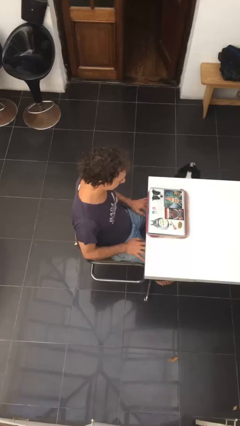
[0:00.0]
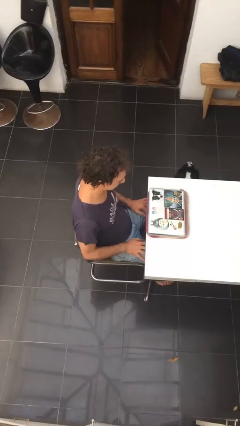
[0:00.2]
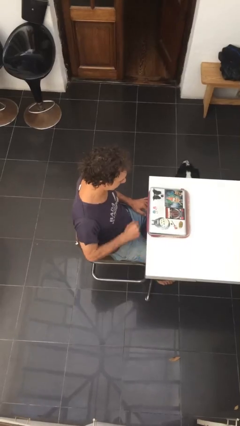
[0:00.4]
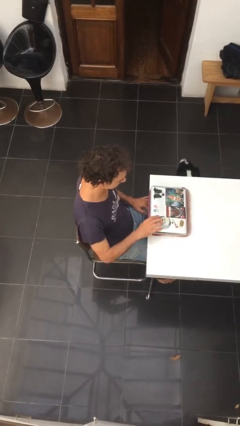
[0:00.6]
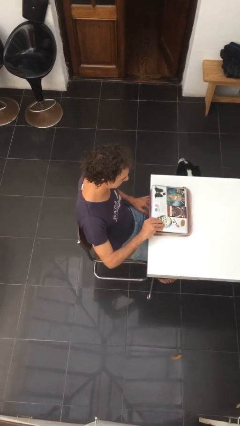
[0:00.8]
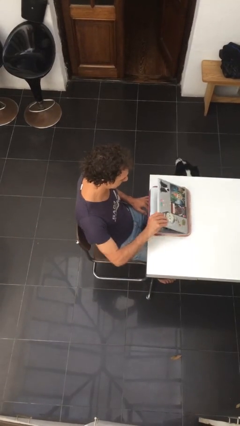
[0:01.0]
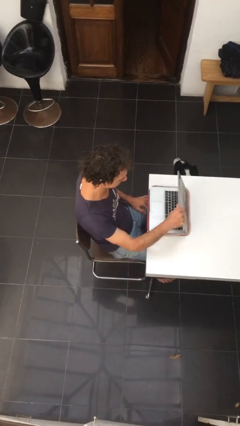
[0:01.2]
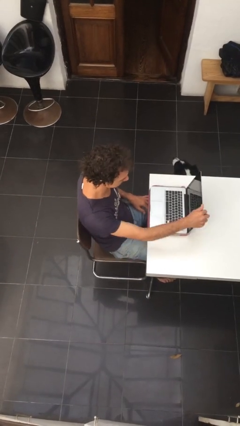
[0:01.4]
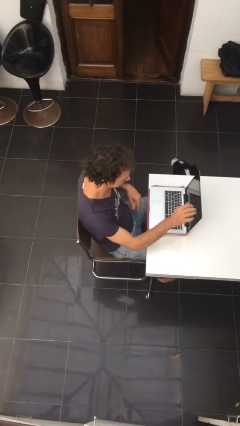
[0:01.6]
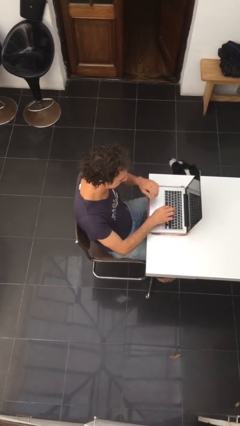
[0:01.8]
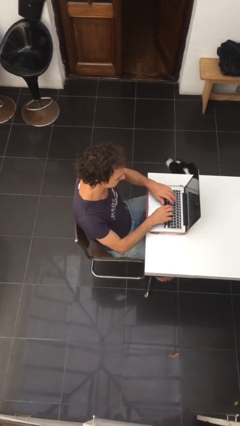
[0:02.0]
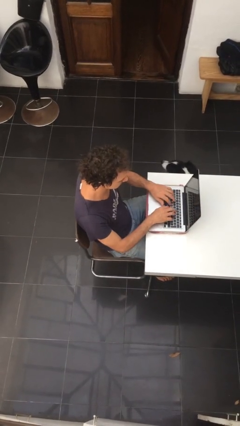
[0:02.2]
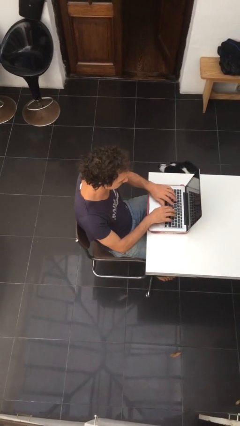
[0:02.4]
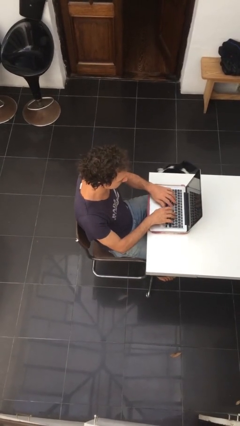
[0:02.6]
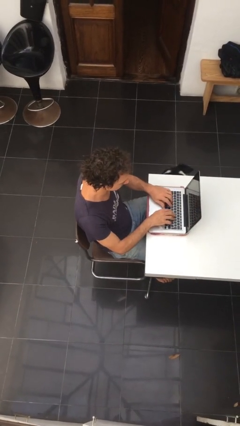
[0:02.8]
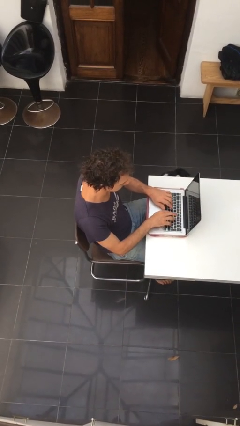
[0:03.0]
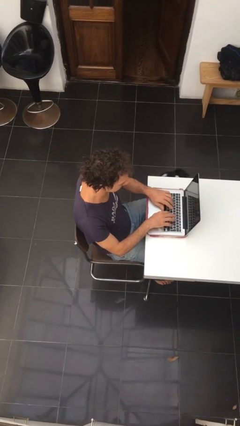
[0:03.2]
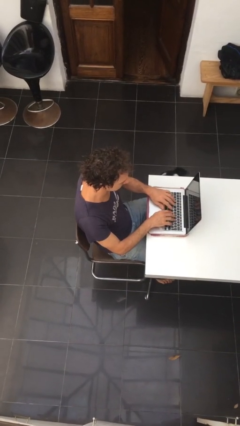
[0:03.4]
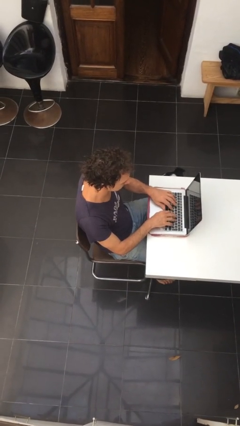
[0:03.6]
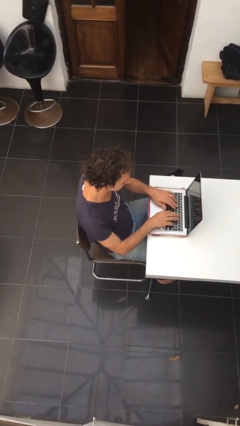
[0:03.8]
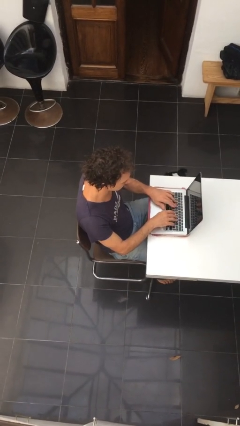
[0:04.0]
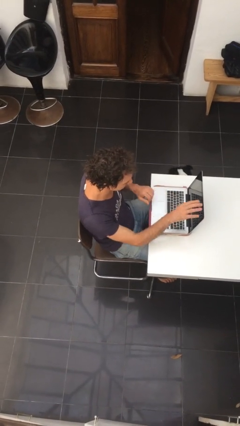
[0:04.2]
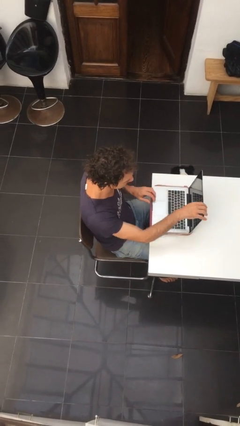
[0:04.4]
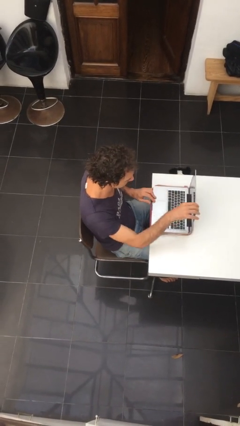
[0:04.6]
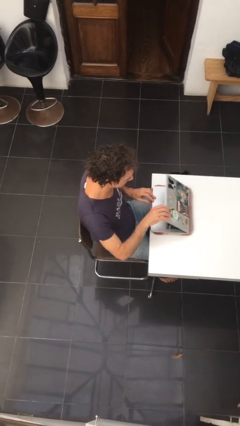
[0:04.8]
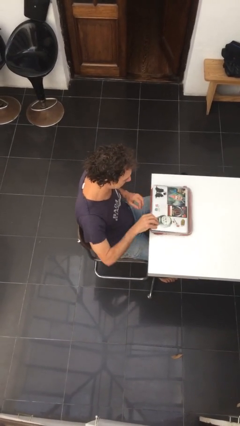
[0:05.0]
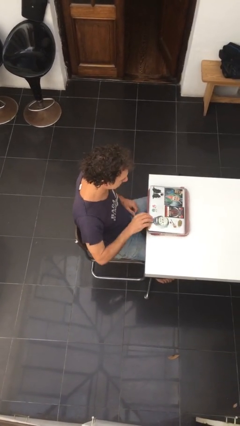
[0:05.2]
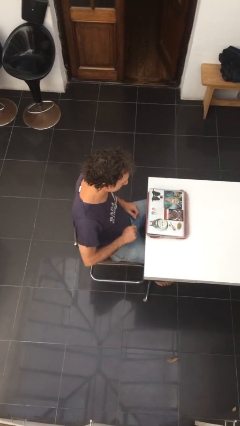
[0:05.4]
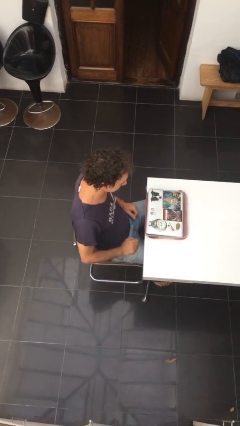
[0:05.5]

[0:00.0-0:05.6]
person interacts with laptop

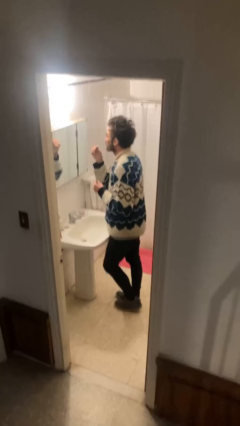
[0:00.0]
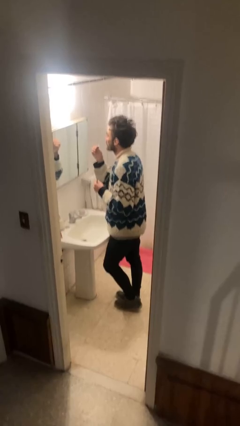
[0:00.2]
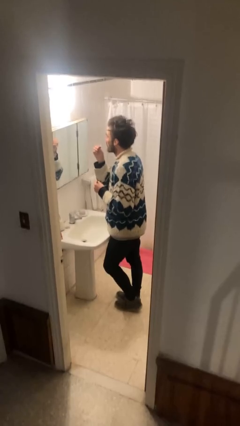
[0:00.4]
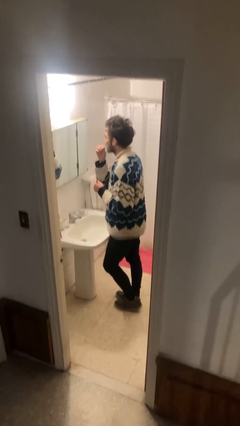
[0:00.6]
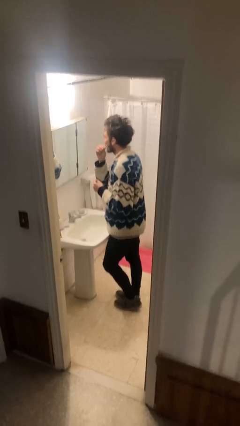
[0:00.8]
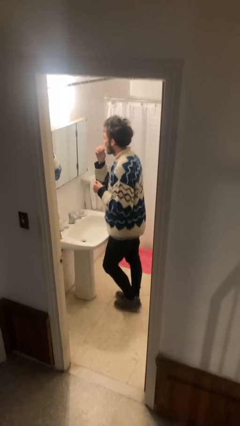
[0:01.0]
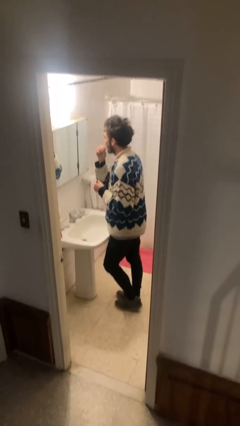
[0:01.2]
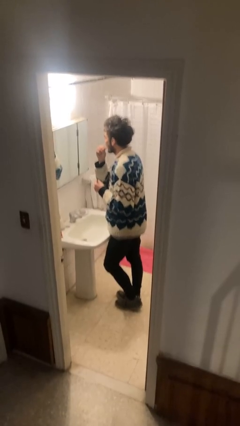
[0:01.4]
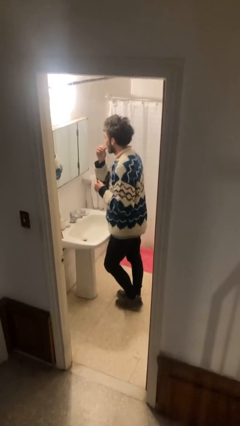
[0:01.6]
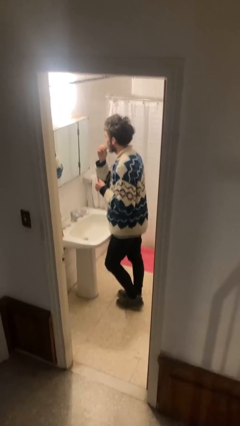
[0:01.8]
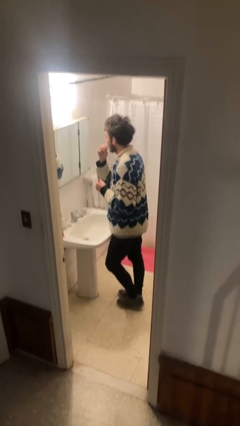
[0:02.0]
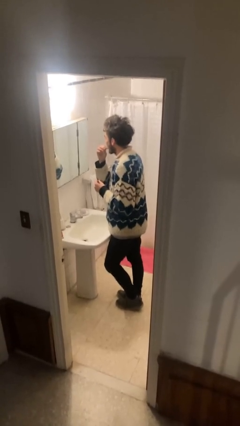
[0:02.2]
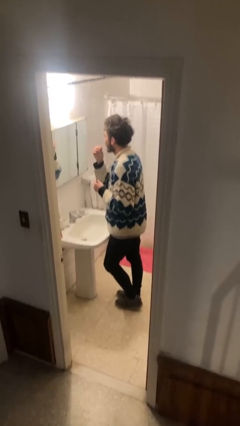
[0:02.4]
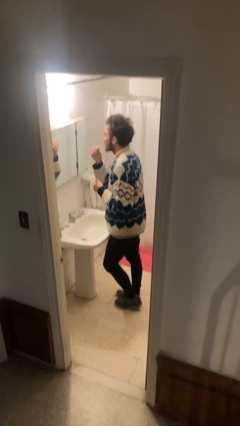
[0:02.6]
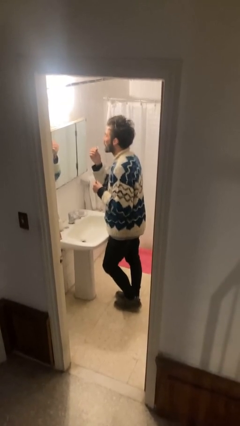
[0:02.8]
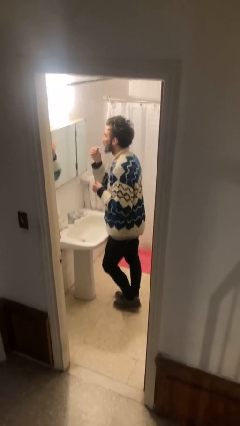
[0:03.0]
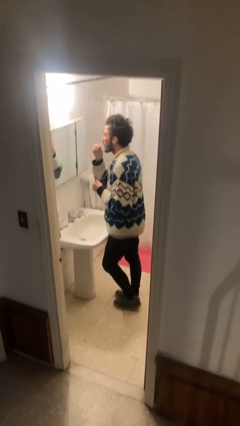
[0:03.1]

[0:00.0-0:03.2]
person applies lip makeup

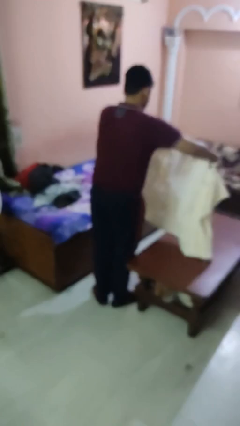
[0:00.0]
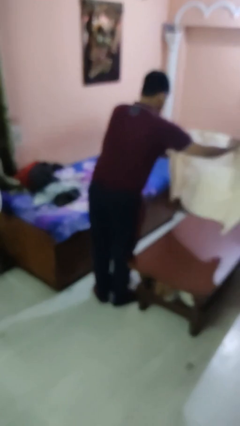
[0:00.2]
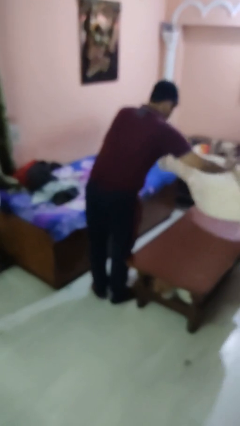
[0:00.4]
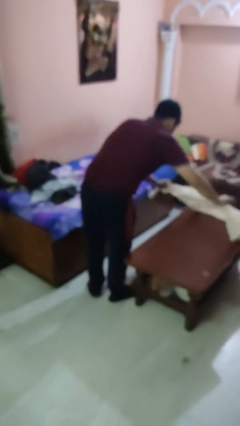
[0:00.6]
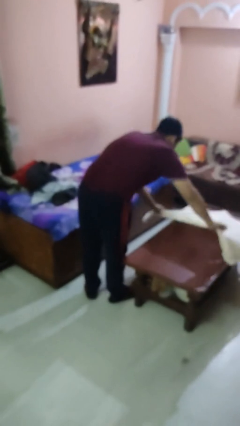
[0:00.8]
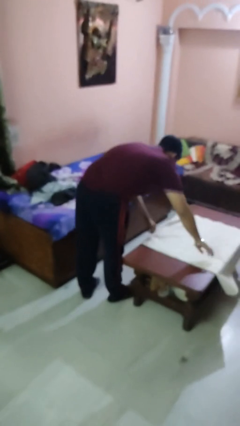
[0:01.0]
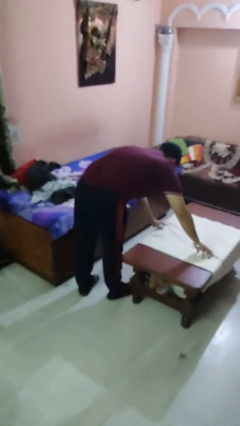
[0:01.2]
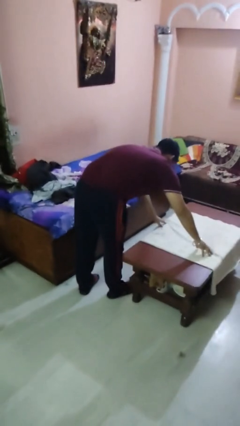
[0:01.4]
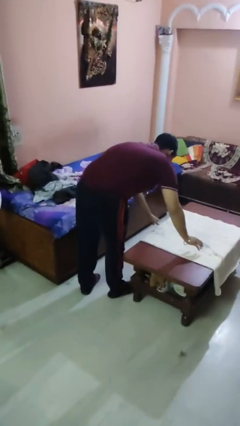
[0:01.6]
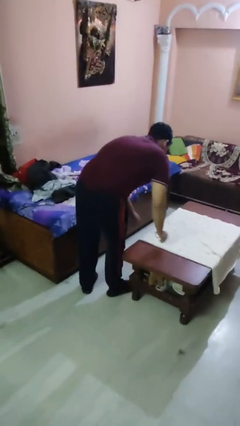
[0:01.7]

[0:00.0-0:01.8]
person spreads tablecloth

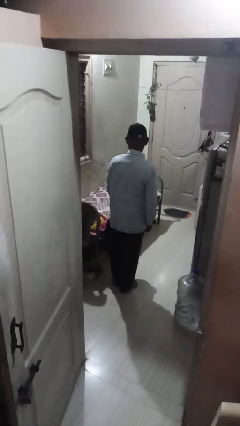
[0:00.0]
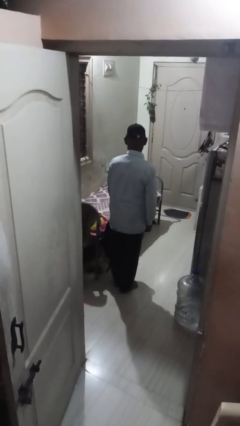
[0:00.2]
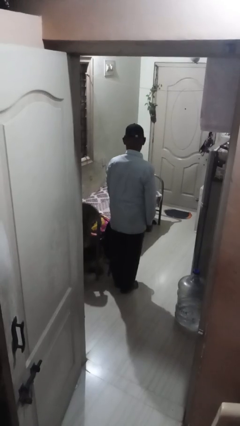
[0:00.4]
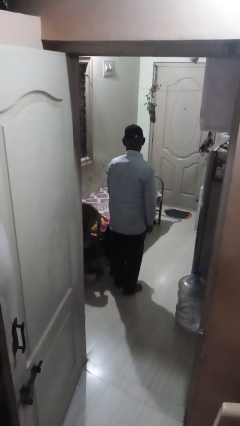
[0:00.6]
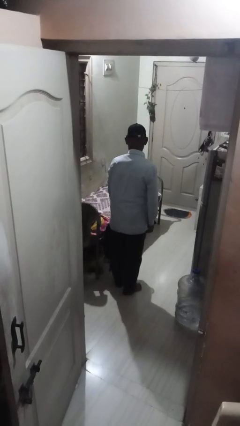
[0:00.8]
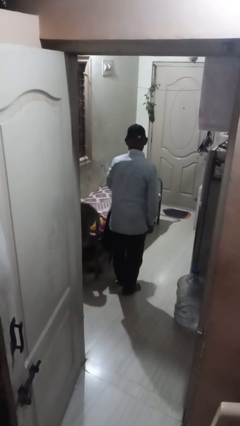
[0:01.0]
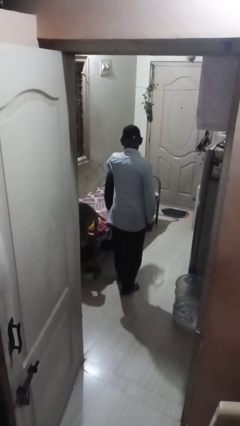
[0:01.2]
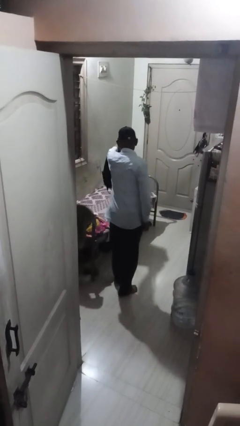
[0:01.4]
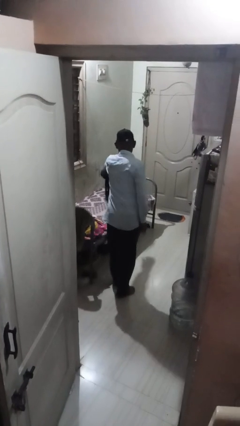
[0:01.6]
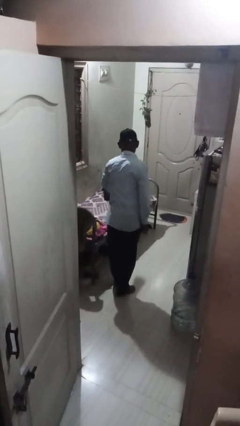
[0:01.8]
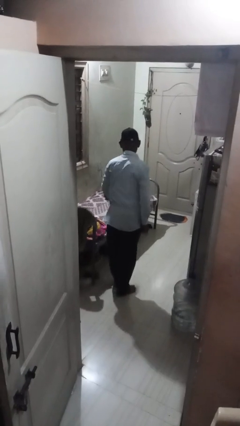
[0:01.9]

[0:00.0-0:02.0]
person throws object on bed

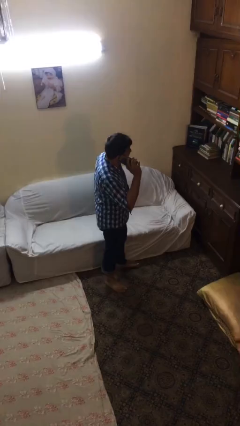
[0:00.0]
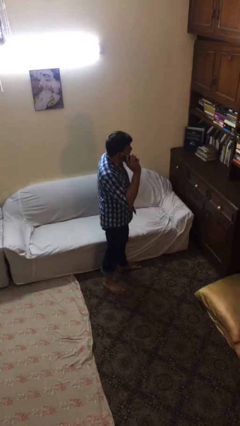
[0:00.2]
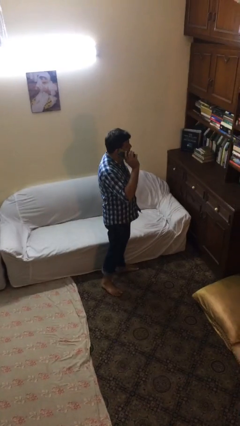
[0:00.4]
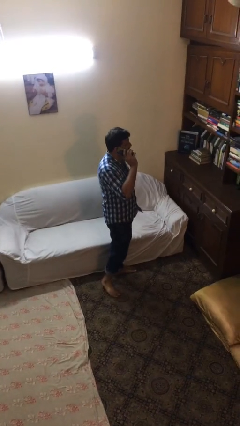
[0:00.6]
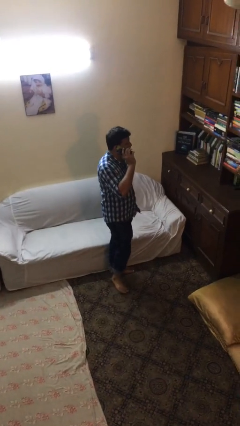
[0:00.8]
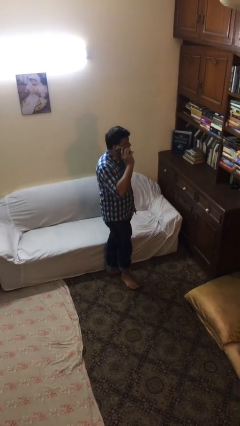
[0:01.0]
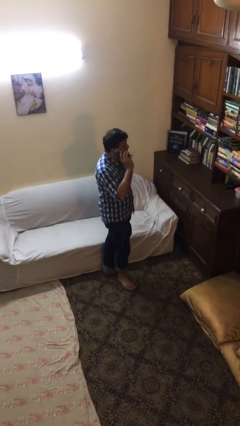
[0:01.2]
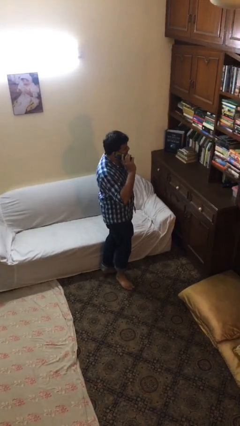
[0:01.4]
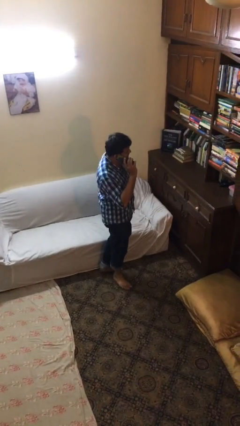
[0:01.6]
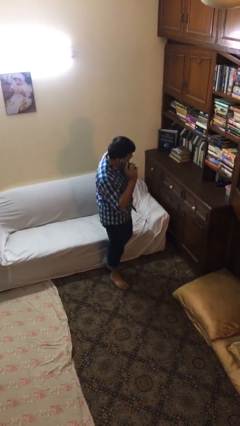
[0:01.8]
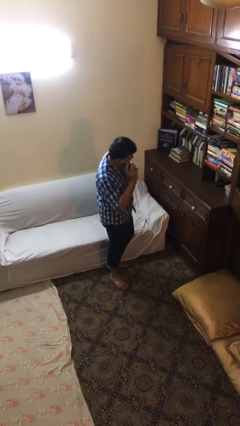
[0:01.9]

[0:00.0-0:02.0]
person talks on phone

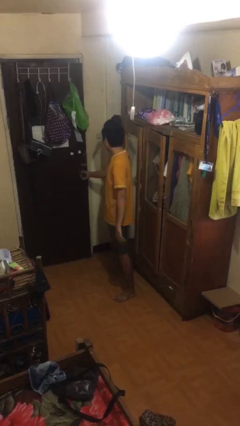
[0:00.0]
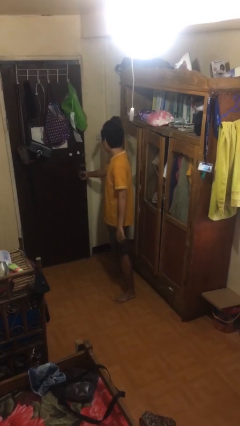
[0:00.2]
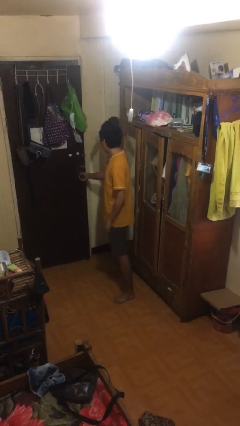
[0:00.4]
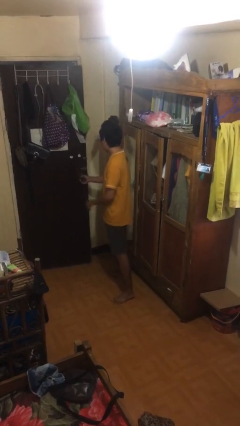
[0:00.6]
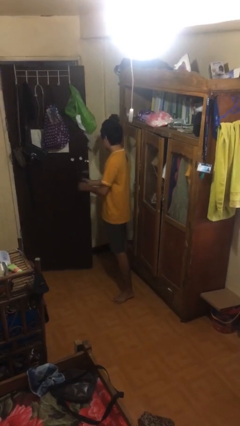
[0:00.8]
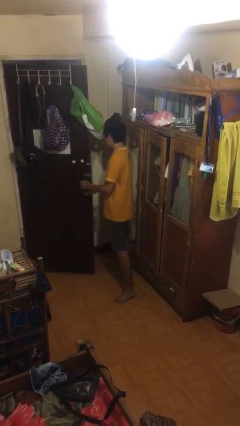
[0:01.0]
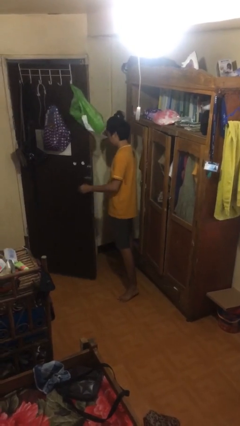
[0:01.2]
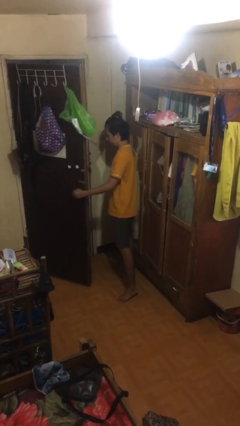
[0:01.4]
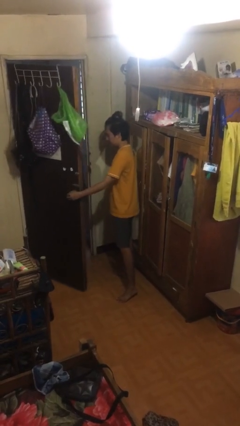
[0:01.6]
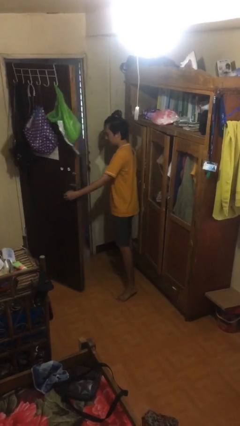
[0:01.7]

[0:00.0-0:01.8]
person opens facility door

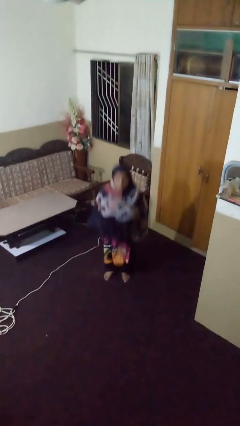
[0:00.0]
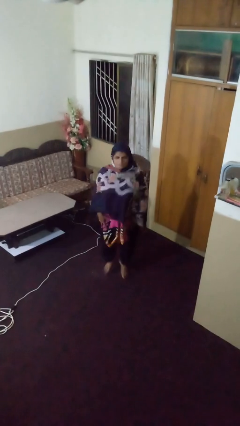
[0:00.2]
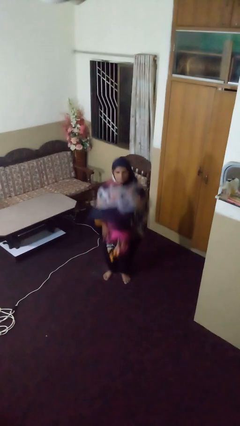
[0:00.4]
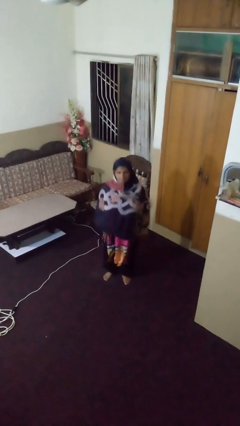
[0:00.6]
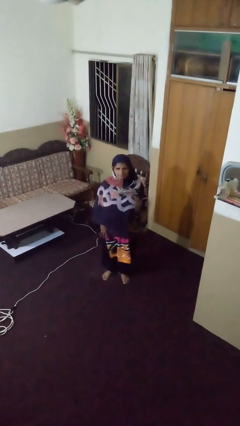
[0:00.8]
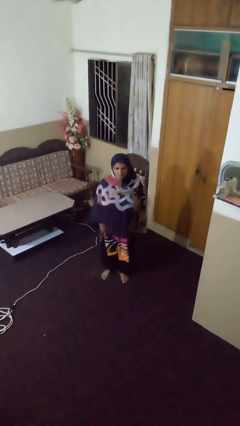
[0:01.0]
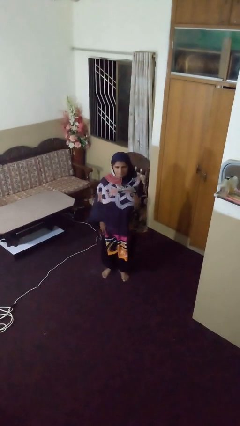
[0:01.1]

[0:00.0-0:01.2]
person jumps
